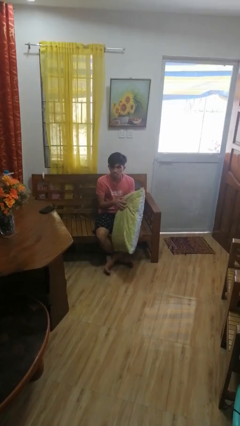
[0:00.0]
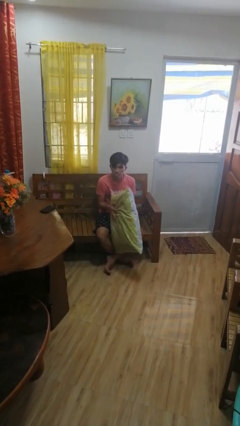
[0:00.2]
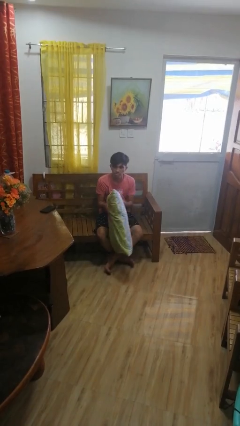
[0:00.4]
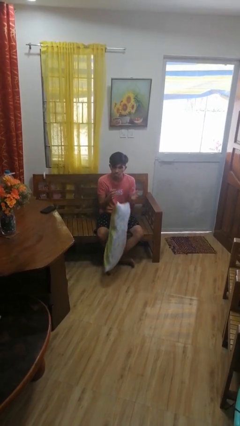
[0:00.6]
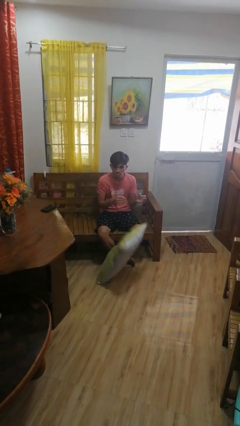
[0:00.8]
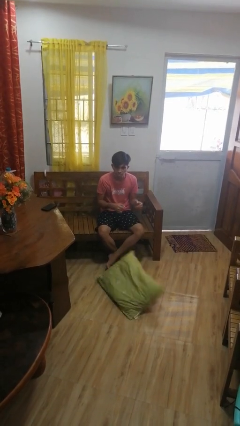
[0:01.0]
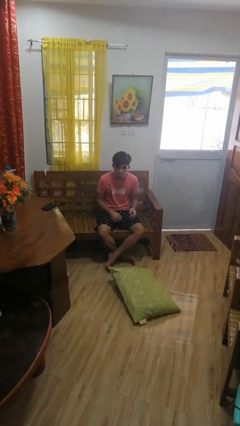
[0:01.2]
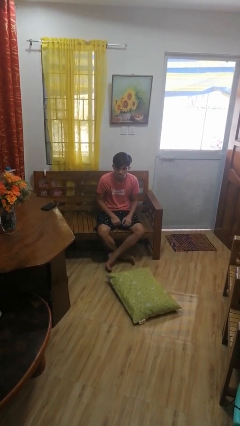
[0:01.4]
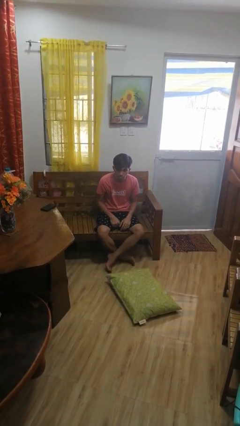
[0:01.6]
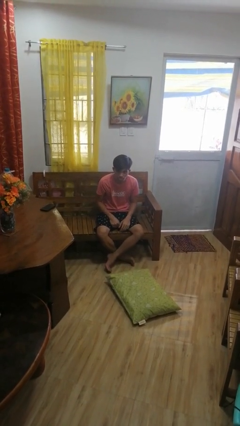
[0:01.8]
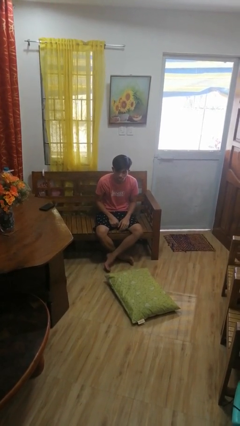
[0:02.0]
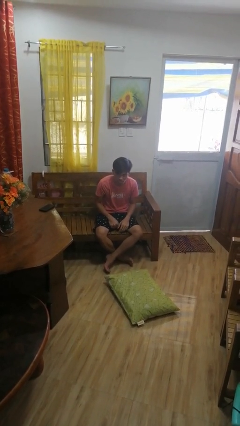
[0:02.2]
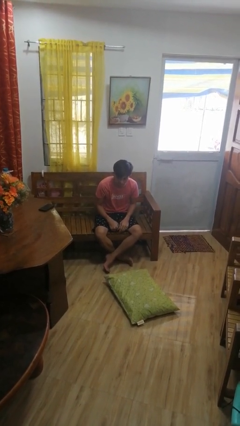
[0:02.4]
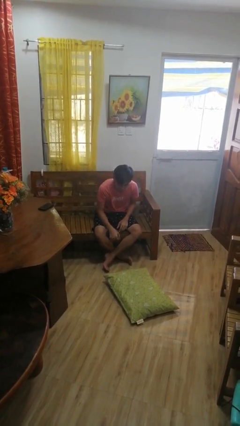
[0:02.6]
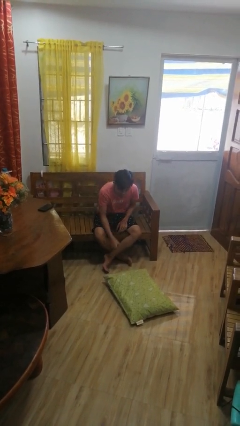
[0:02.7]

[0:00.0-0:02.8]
person drops object

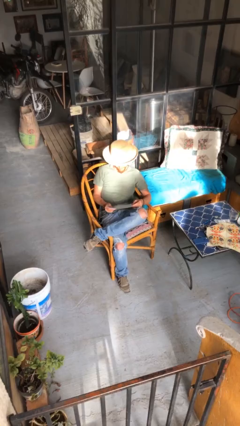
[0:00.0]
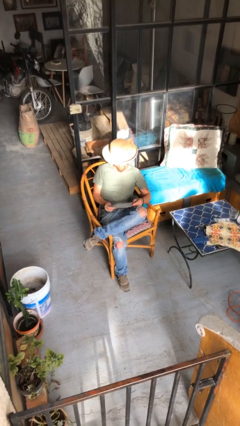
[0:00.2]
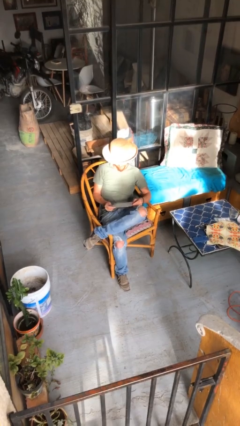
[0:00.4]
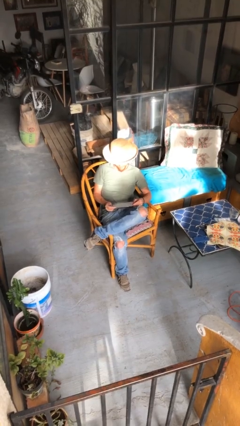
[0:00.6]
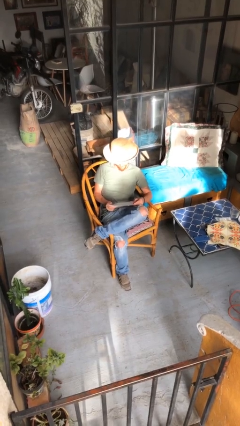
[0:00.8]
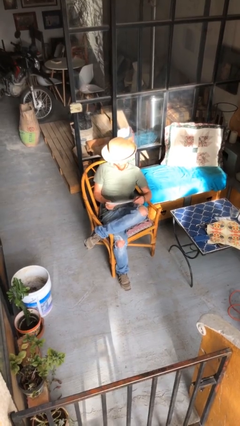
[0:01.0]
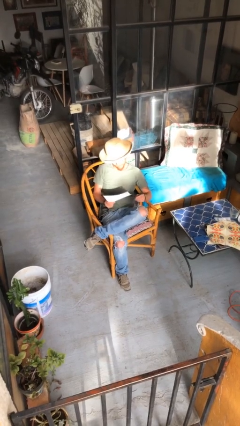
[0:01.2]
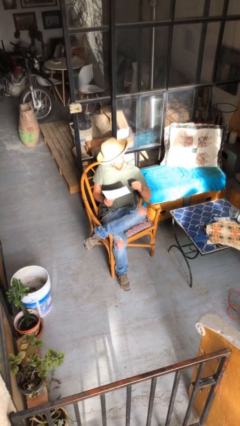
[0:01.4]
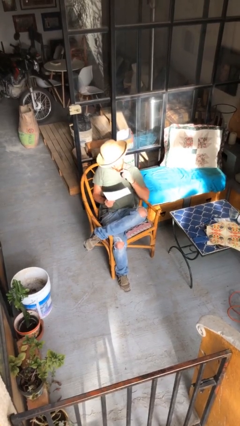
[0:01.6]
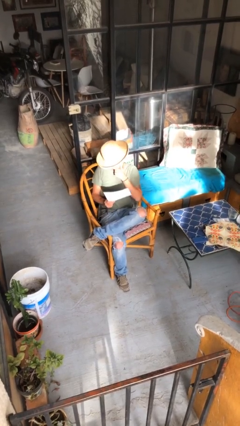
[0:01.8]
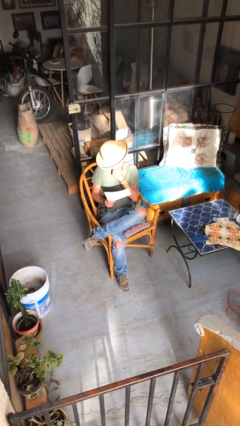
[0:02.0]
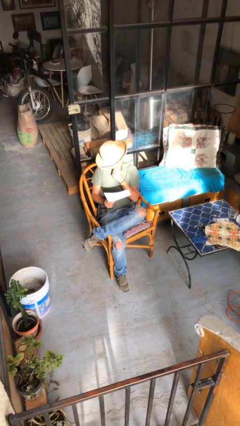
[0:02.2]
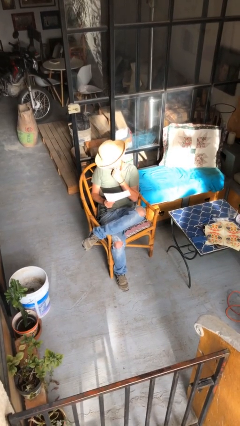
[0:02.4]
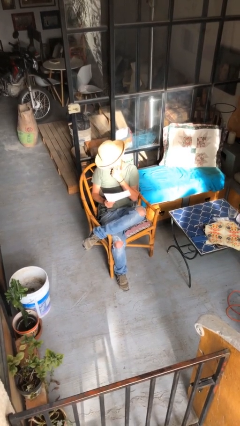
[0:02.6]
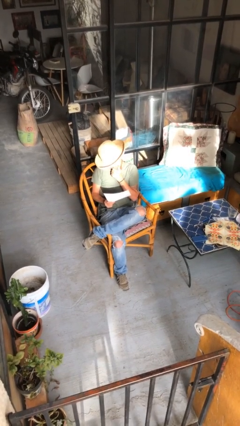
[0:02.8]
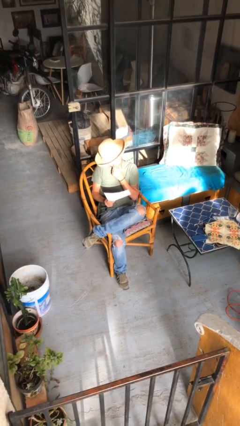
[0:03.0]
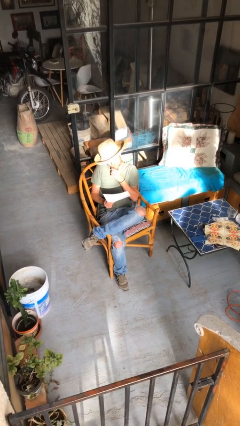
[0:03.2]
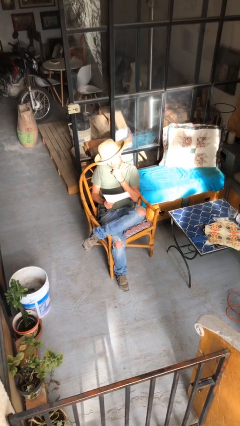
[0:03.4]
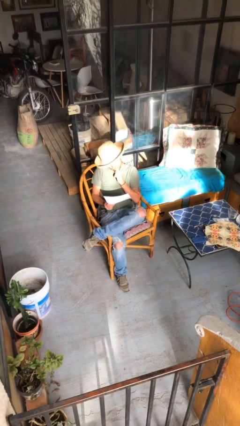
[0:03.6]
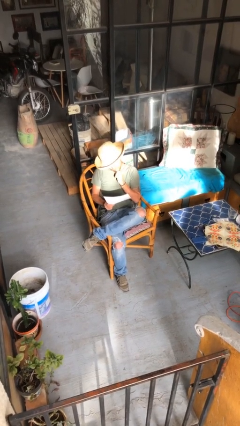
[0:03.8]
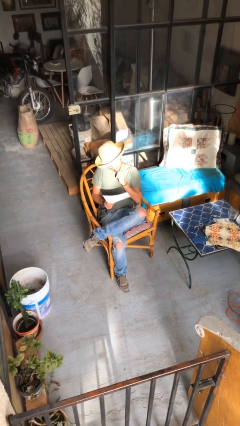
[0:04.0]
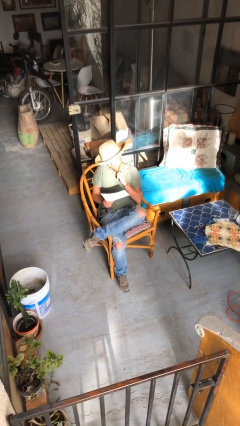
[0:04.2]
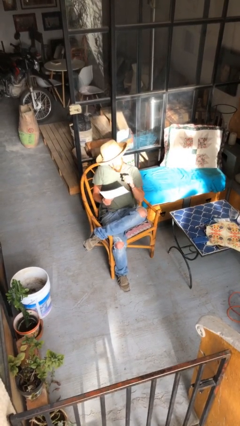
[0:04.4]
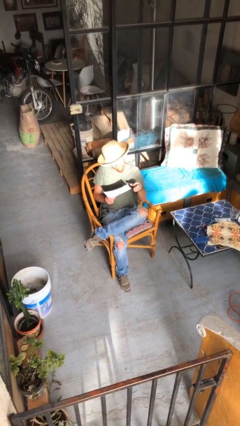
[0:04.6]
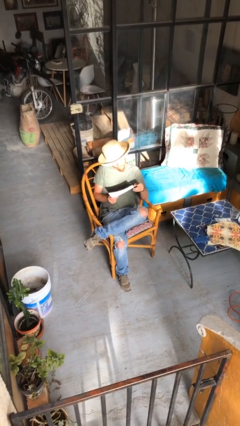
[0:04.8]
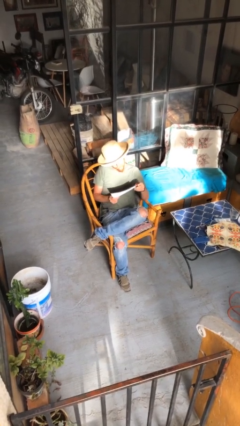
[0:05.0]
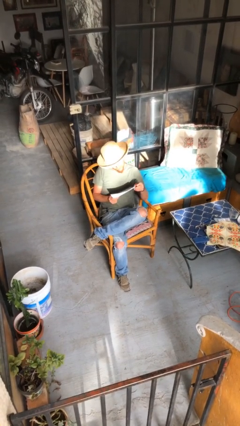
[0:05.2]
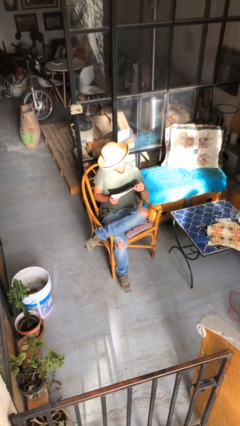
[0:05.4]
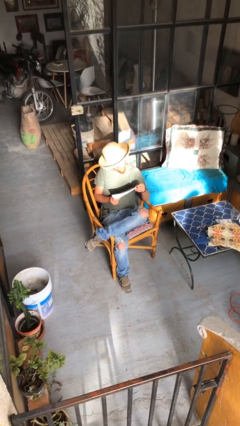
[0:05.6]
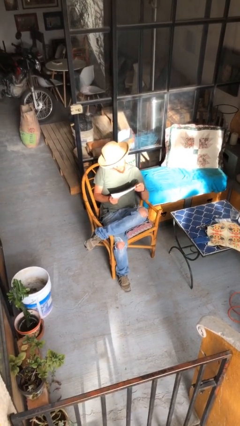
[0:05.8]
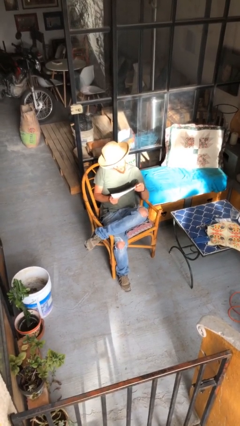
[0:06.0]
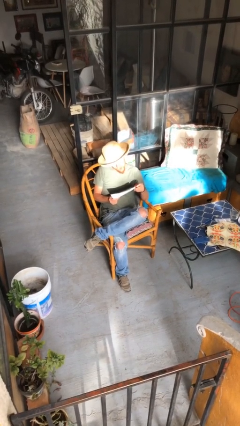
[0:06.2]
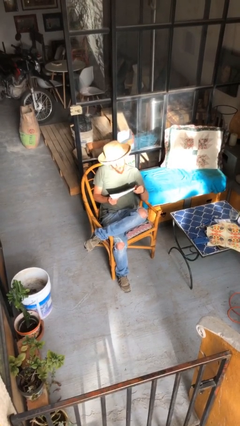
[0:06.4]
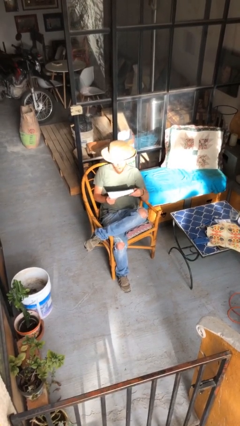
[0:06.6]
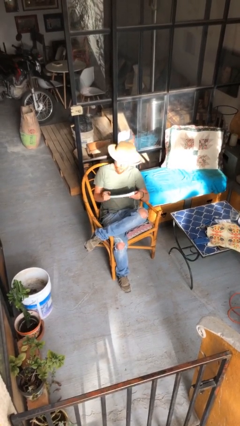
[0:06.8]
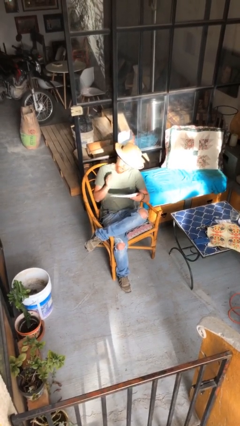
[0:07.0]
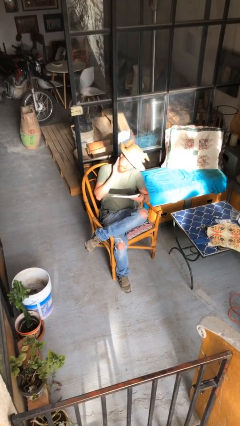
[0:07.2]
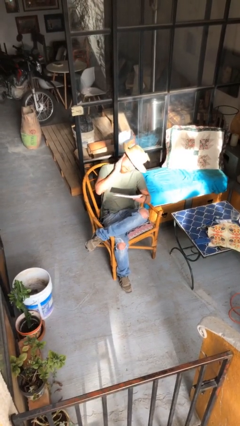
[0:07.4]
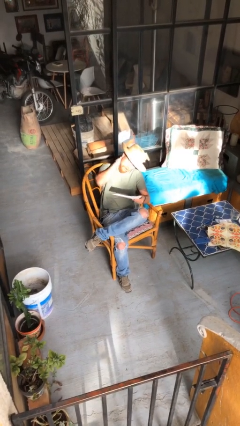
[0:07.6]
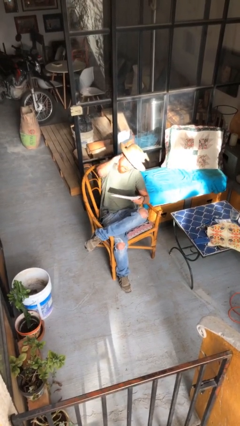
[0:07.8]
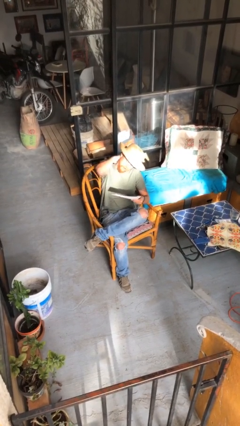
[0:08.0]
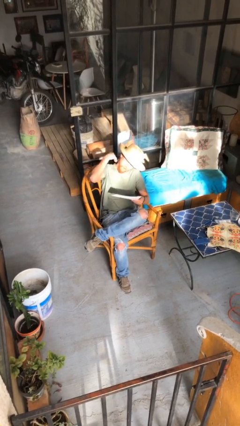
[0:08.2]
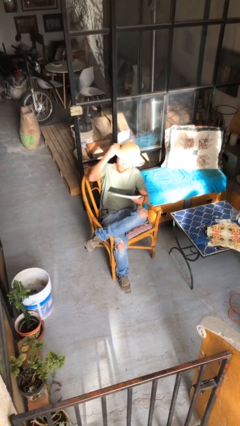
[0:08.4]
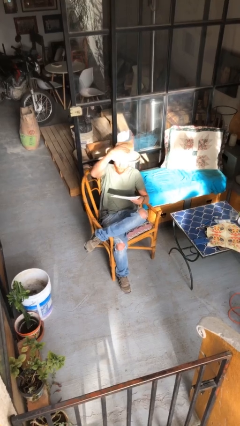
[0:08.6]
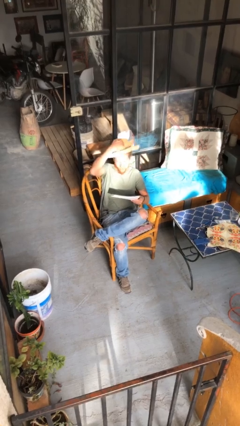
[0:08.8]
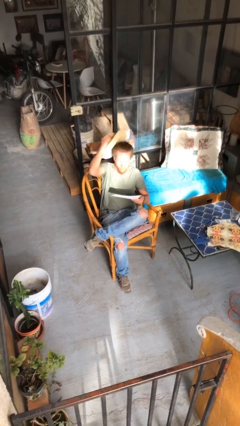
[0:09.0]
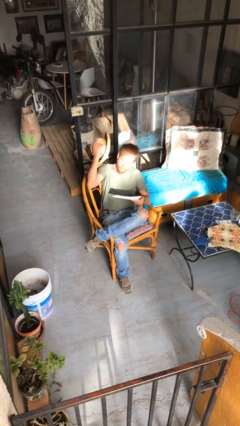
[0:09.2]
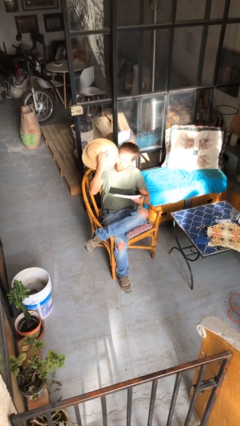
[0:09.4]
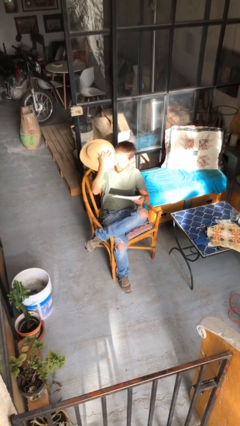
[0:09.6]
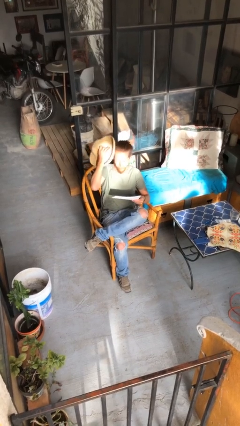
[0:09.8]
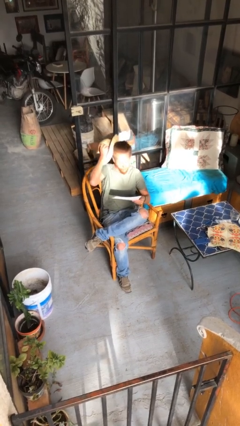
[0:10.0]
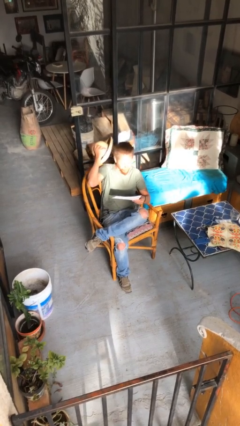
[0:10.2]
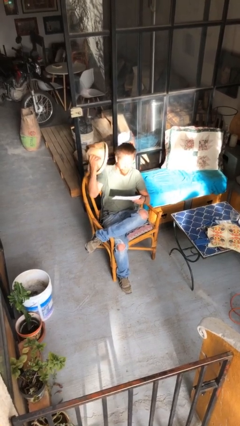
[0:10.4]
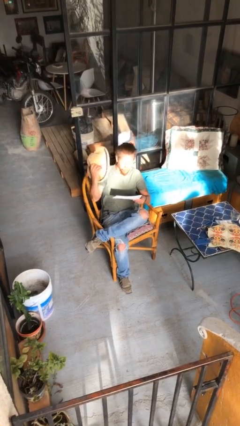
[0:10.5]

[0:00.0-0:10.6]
person reads document

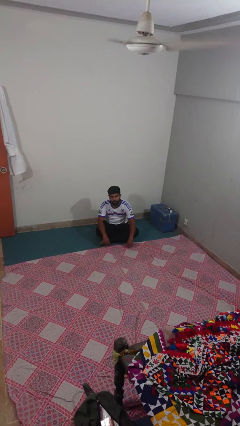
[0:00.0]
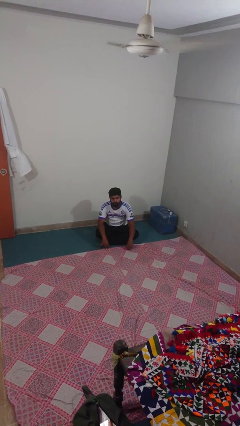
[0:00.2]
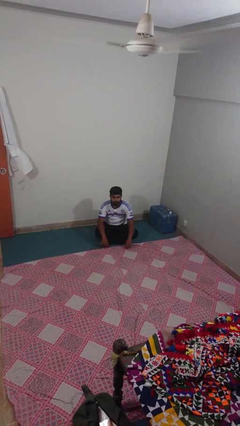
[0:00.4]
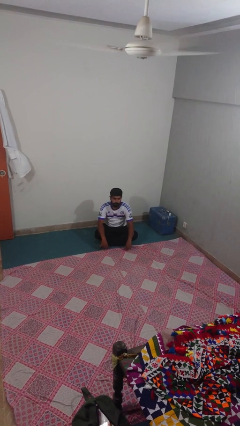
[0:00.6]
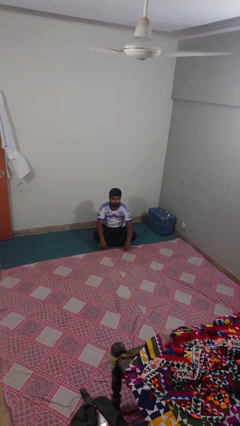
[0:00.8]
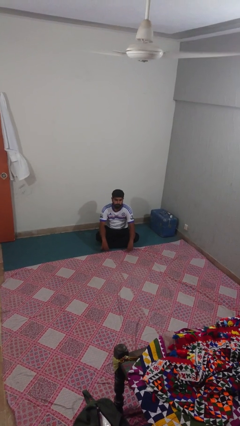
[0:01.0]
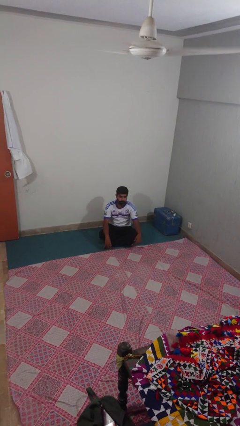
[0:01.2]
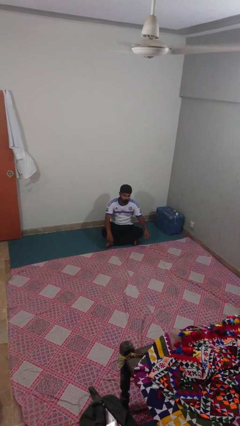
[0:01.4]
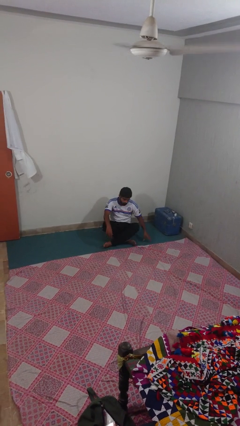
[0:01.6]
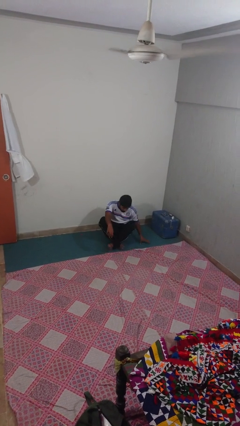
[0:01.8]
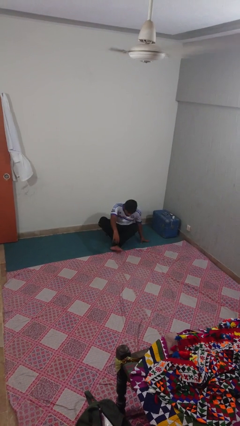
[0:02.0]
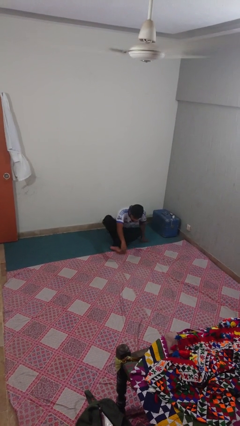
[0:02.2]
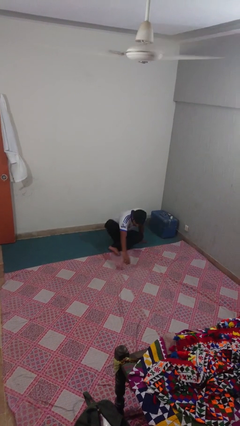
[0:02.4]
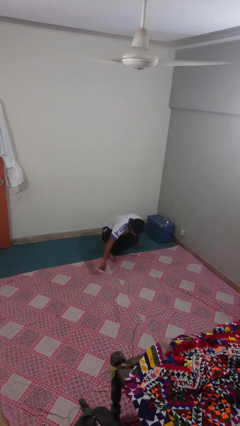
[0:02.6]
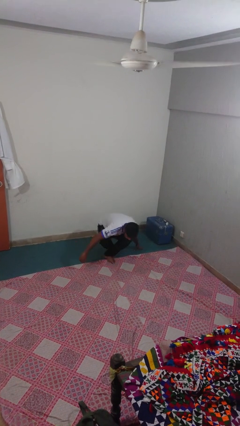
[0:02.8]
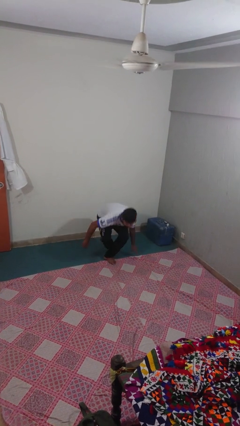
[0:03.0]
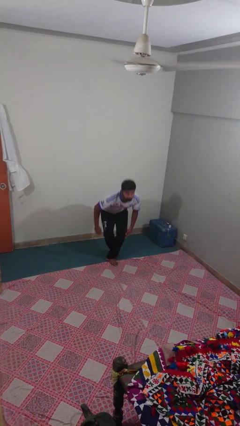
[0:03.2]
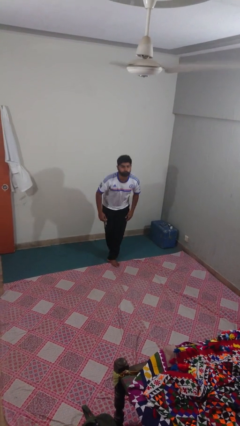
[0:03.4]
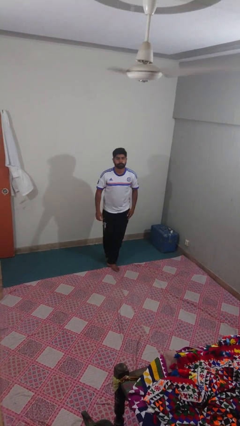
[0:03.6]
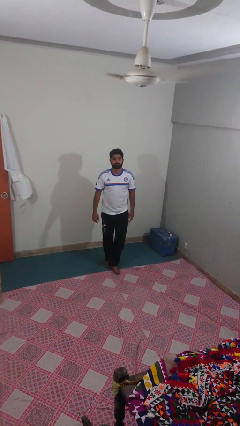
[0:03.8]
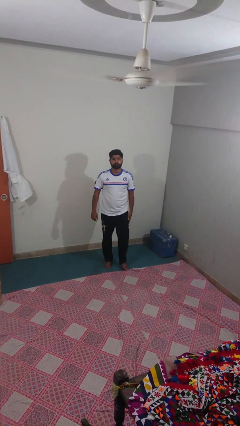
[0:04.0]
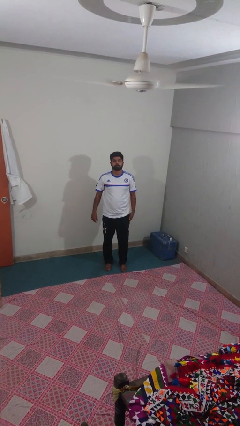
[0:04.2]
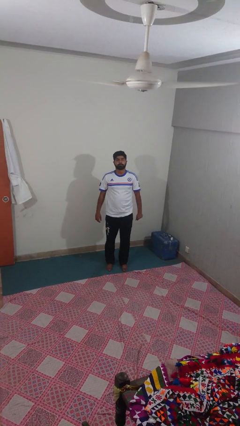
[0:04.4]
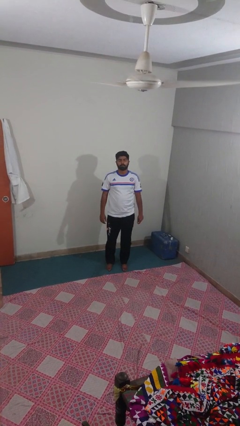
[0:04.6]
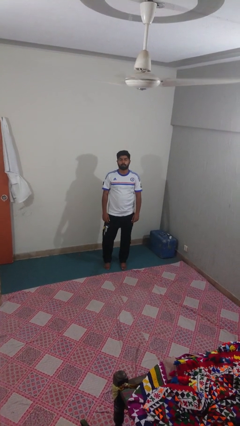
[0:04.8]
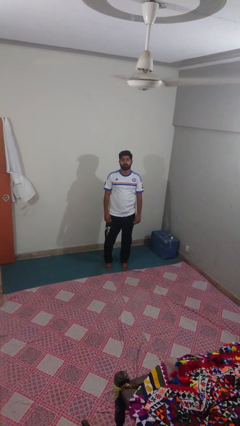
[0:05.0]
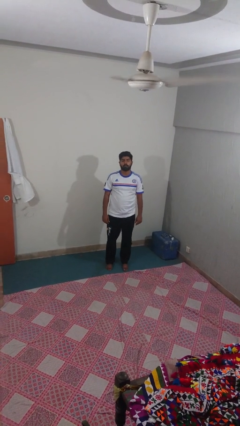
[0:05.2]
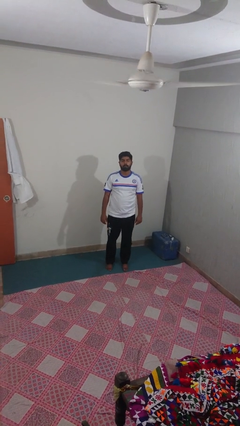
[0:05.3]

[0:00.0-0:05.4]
person stands up from floor
